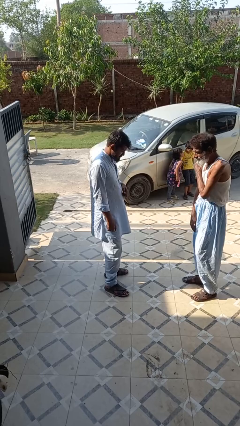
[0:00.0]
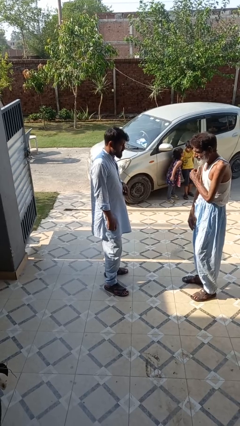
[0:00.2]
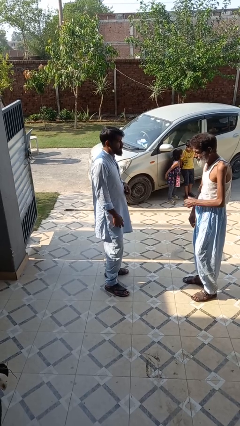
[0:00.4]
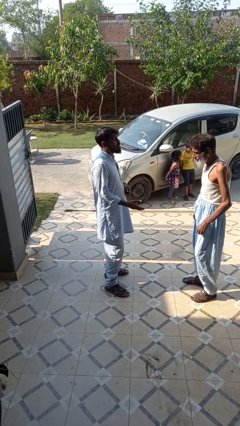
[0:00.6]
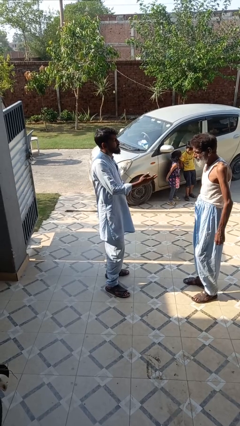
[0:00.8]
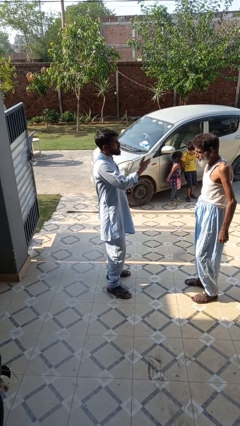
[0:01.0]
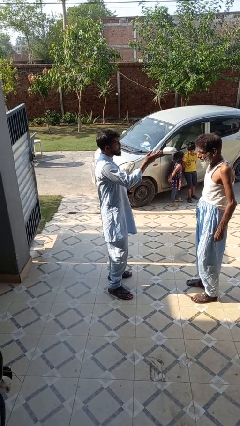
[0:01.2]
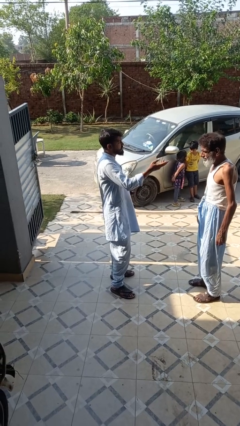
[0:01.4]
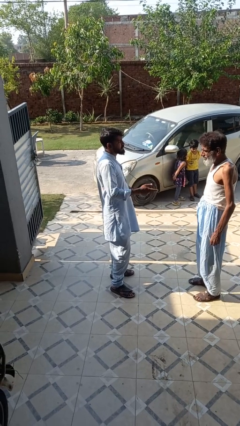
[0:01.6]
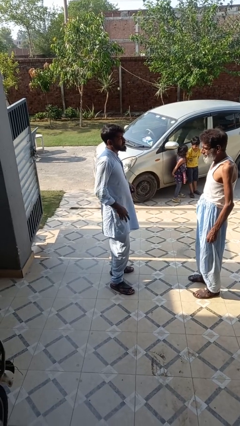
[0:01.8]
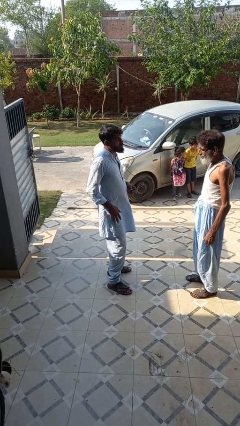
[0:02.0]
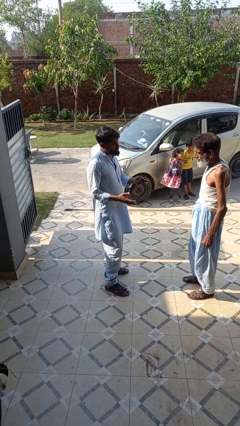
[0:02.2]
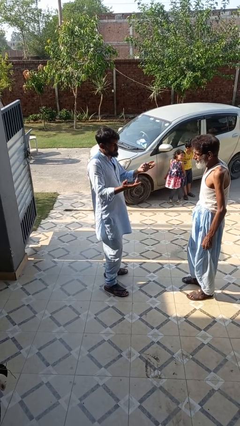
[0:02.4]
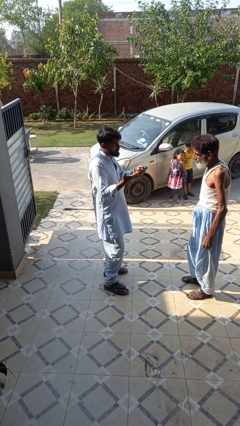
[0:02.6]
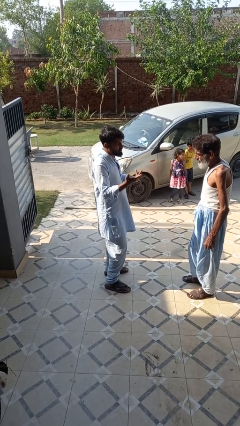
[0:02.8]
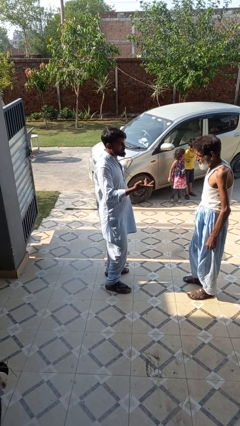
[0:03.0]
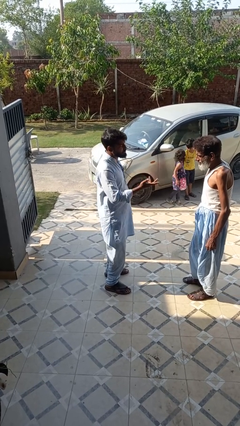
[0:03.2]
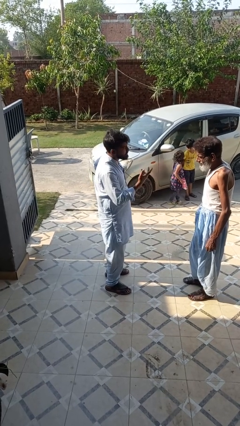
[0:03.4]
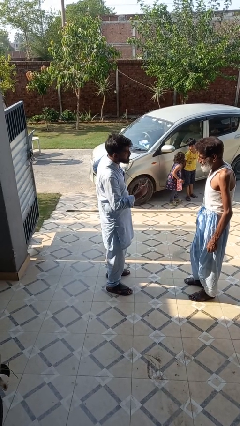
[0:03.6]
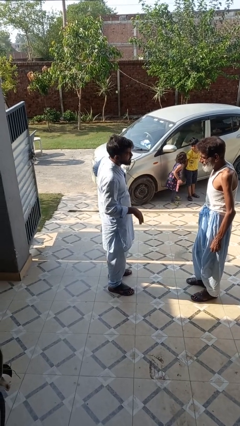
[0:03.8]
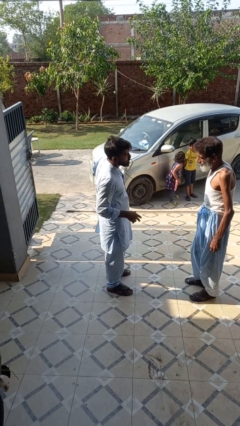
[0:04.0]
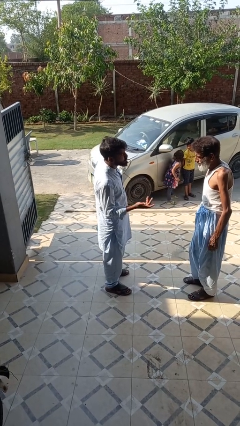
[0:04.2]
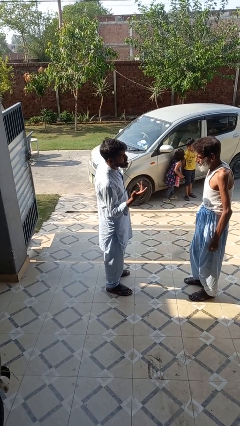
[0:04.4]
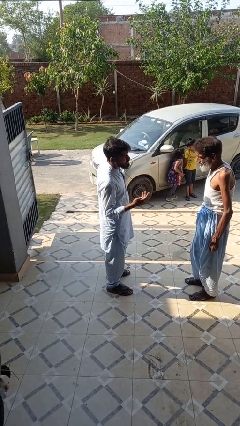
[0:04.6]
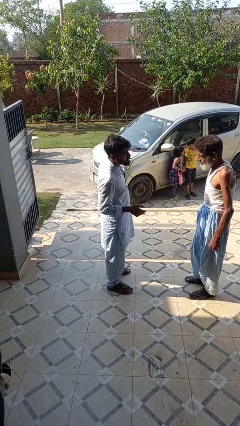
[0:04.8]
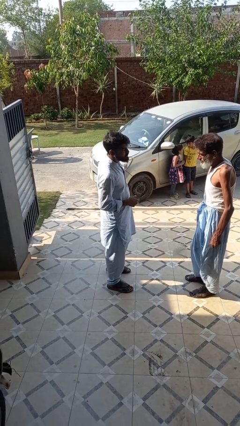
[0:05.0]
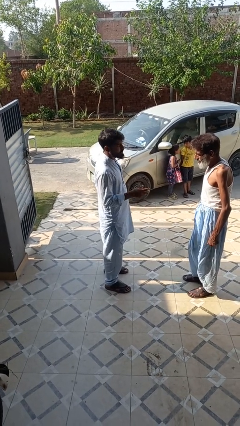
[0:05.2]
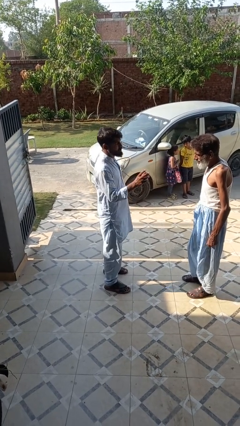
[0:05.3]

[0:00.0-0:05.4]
person talks to person

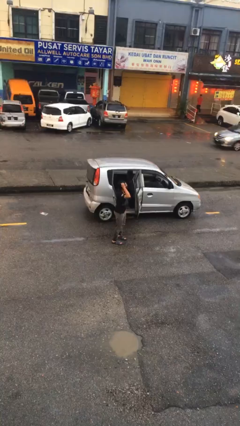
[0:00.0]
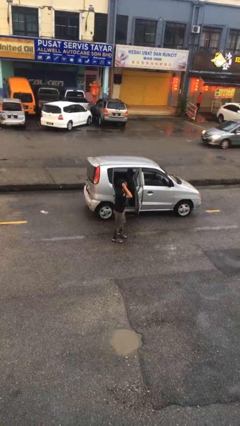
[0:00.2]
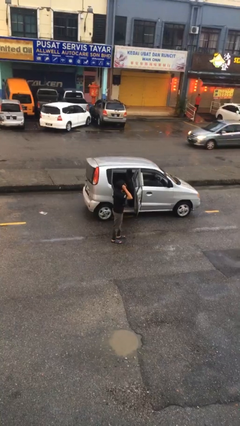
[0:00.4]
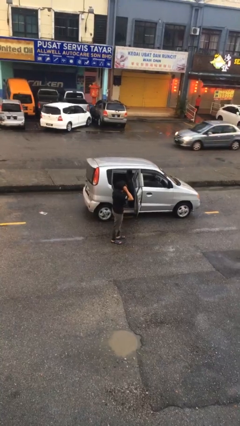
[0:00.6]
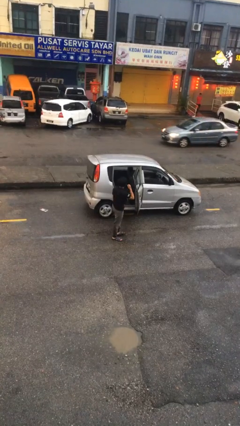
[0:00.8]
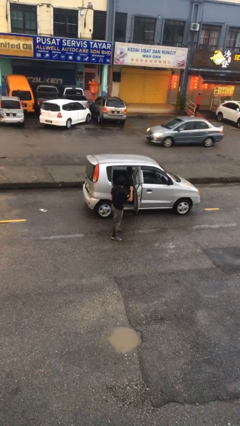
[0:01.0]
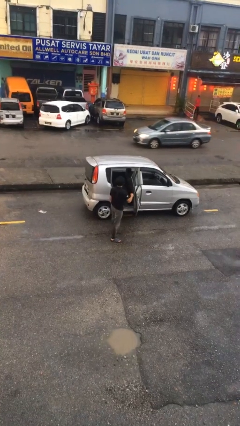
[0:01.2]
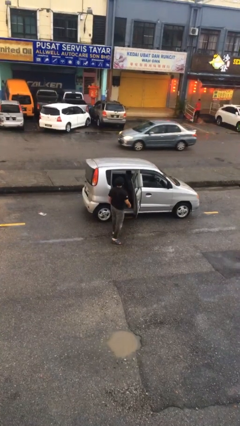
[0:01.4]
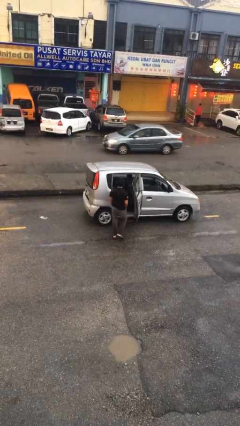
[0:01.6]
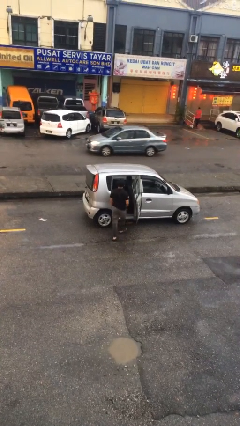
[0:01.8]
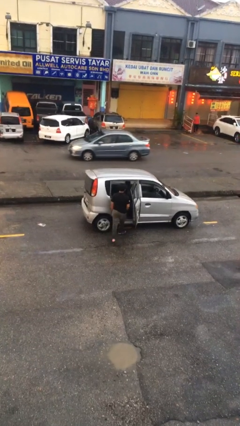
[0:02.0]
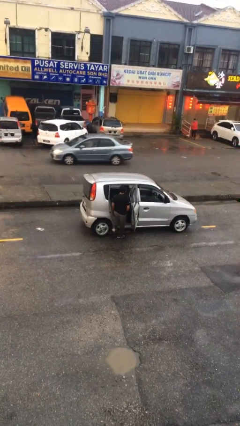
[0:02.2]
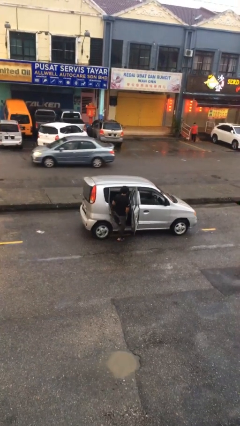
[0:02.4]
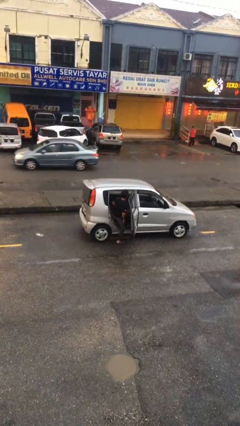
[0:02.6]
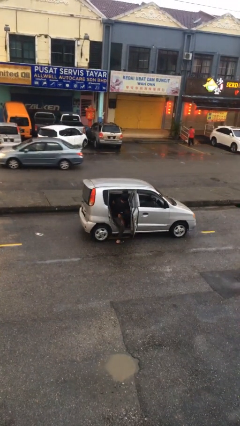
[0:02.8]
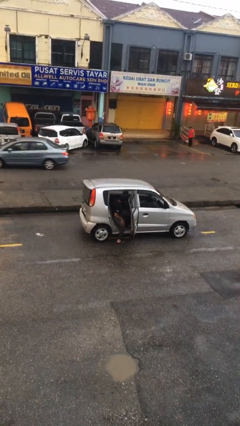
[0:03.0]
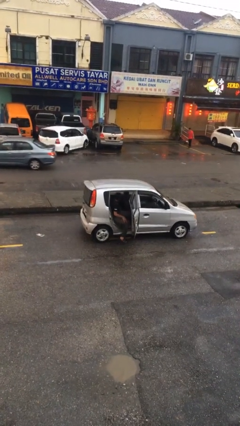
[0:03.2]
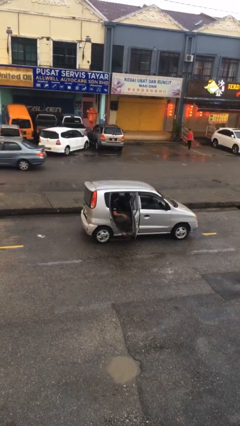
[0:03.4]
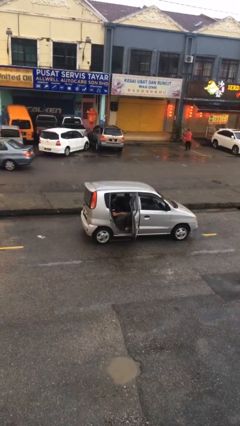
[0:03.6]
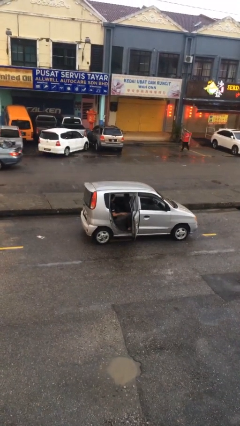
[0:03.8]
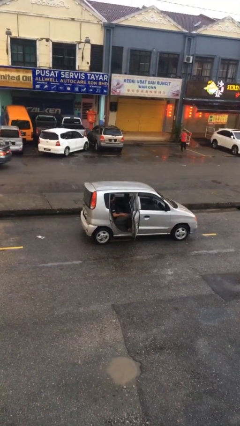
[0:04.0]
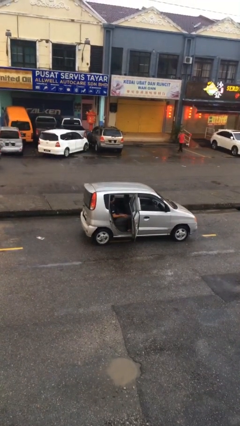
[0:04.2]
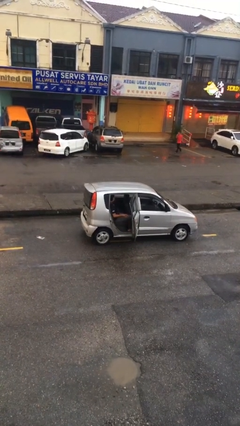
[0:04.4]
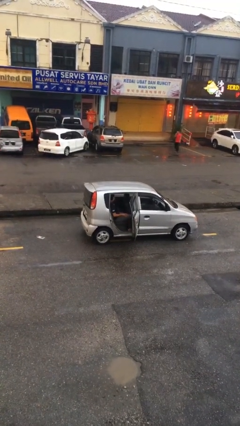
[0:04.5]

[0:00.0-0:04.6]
person enters car

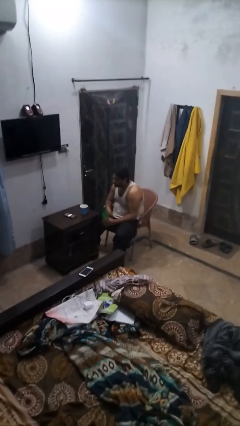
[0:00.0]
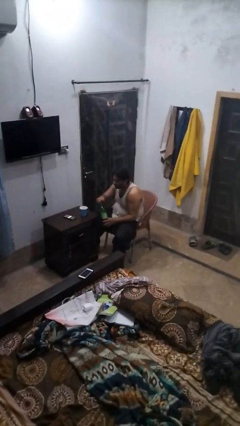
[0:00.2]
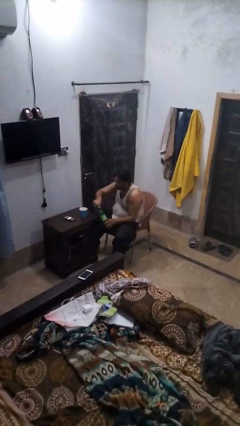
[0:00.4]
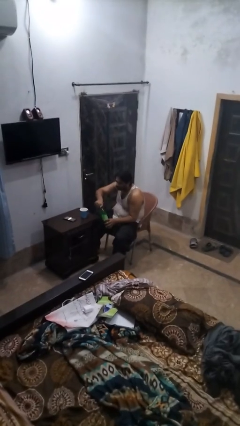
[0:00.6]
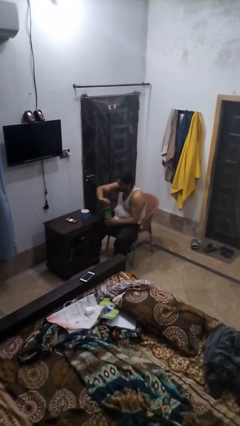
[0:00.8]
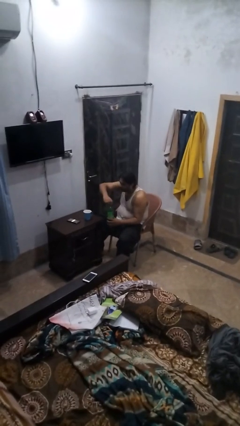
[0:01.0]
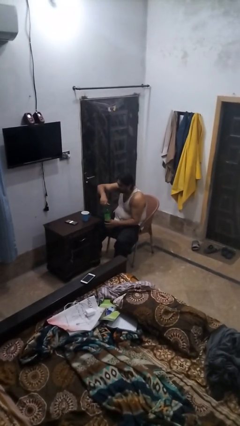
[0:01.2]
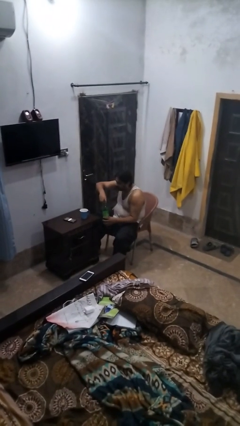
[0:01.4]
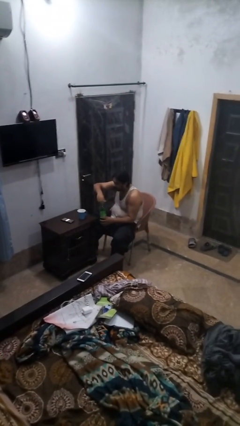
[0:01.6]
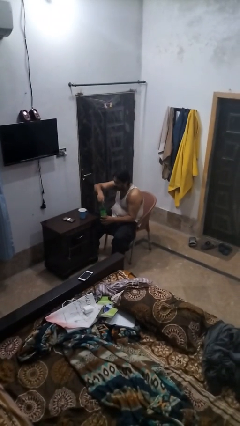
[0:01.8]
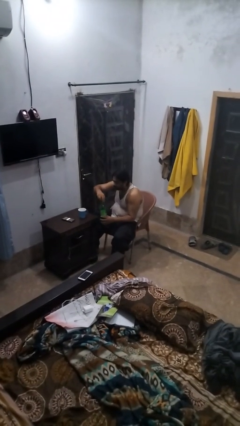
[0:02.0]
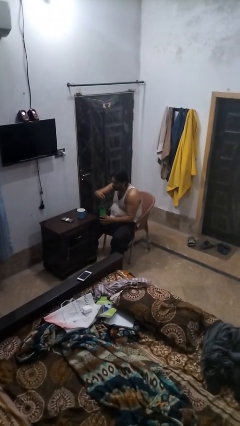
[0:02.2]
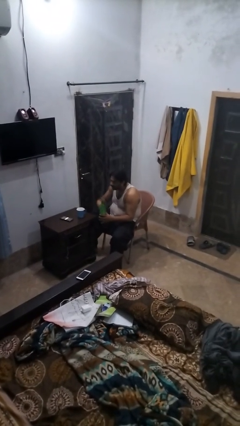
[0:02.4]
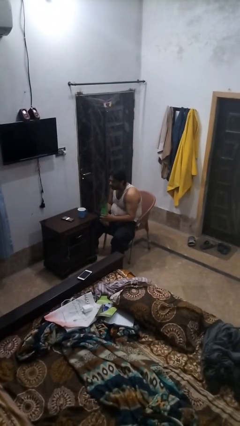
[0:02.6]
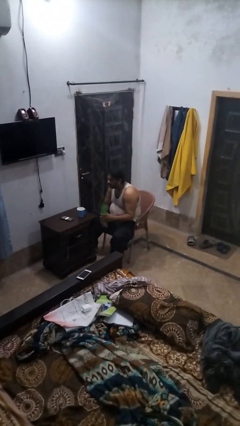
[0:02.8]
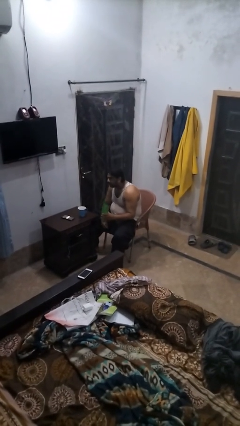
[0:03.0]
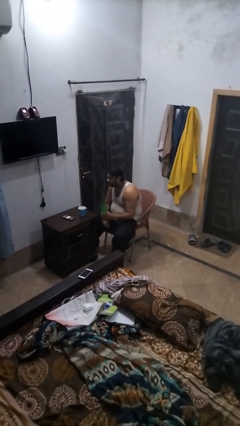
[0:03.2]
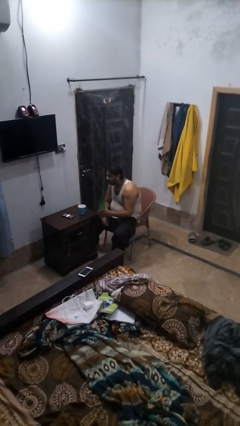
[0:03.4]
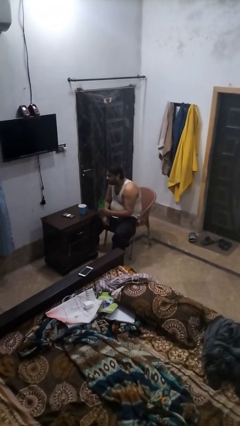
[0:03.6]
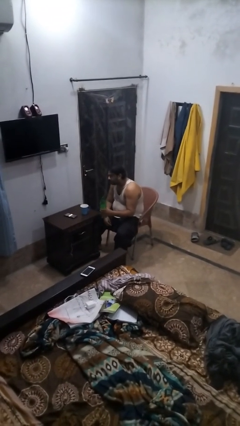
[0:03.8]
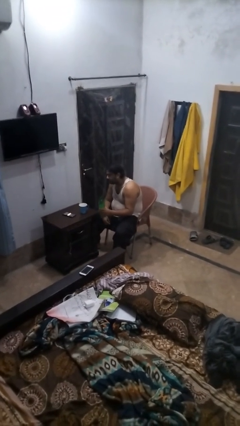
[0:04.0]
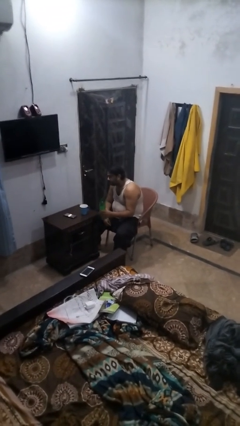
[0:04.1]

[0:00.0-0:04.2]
person unscrews lid from bottle

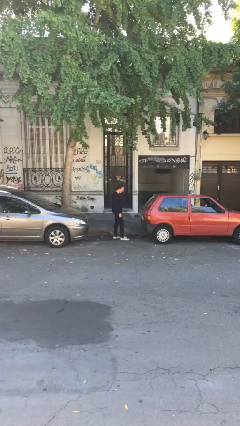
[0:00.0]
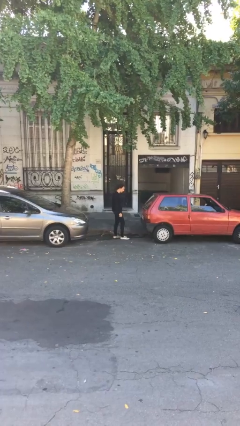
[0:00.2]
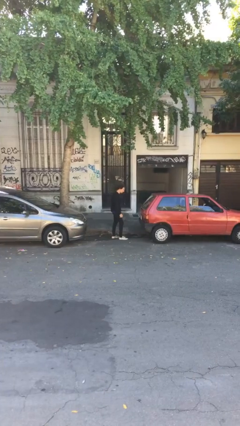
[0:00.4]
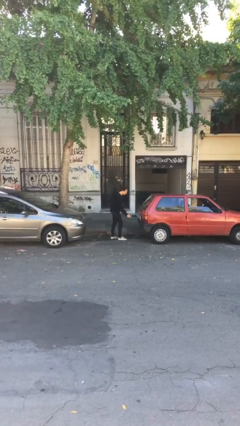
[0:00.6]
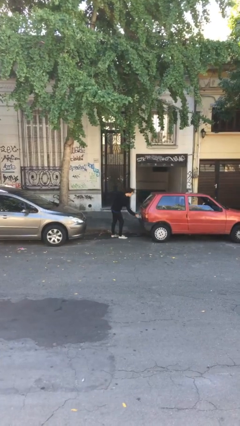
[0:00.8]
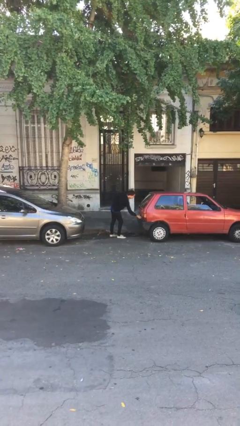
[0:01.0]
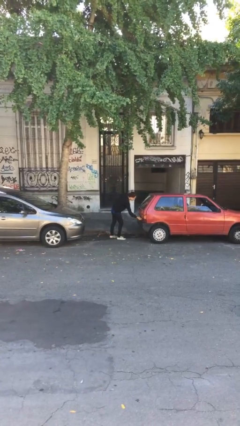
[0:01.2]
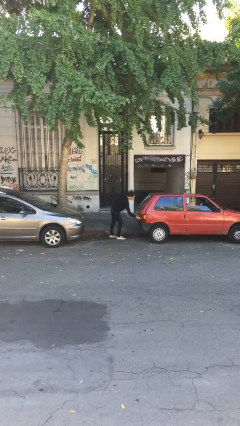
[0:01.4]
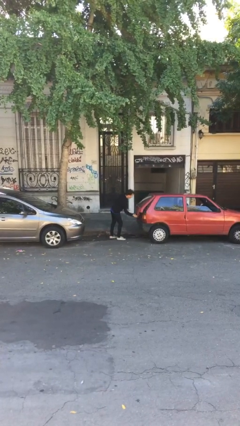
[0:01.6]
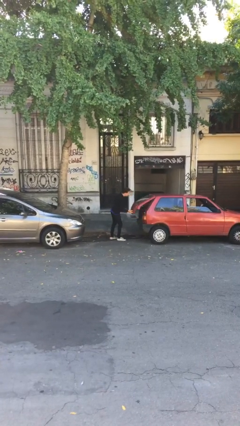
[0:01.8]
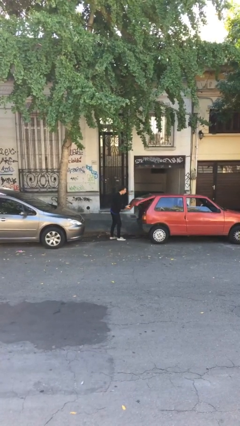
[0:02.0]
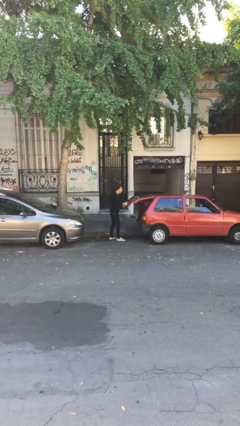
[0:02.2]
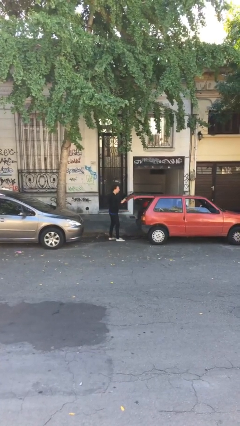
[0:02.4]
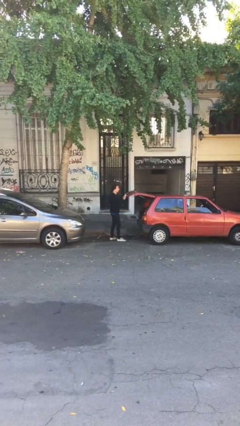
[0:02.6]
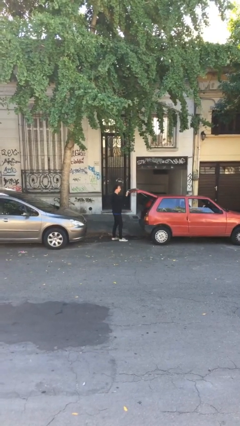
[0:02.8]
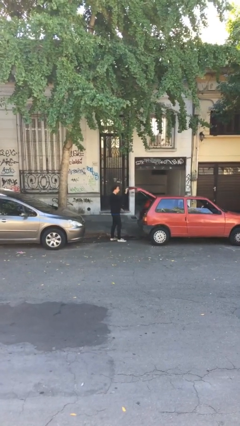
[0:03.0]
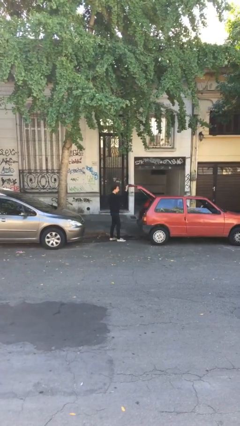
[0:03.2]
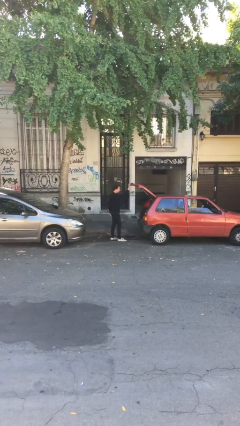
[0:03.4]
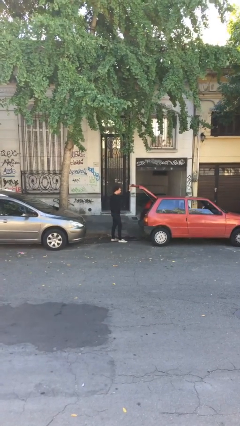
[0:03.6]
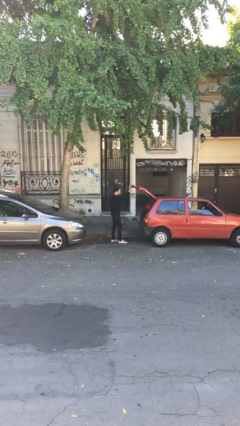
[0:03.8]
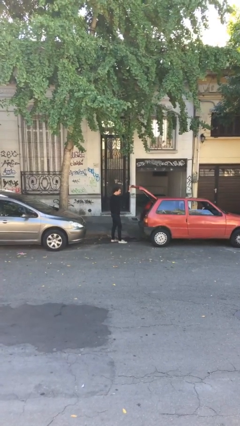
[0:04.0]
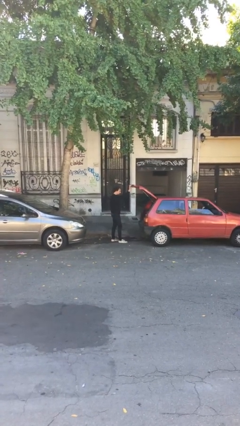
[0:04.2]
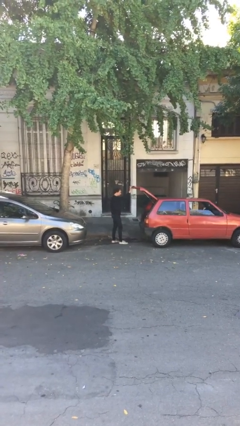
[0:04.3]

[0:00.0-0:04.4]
person opens car trunk
